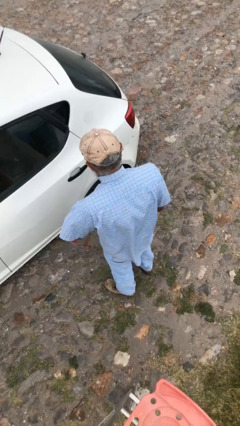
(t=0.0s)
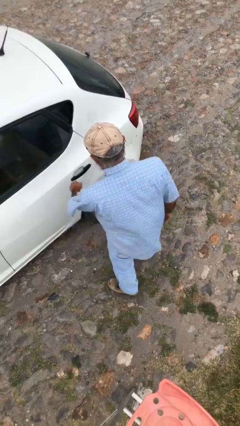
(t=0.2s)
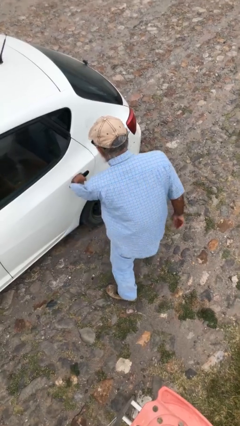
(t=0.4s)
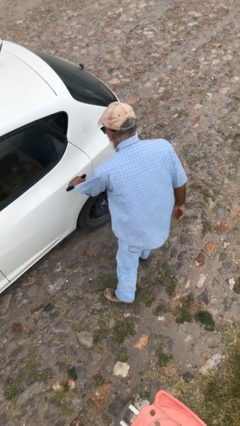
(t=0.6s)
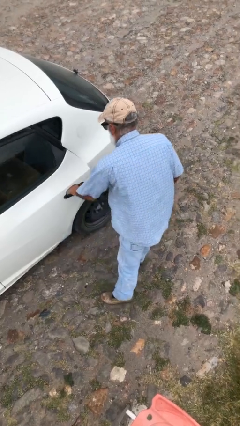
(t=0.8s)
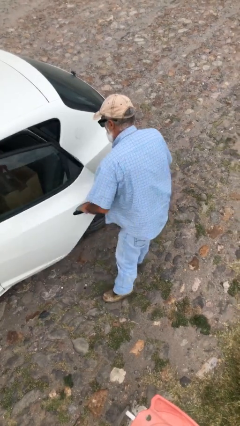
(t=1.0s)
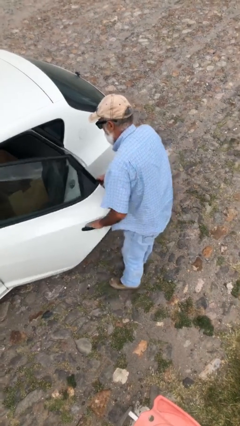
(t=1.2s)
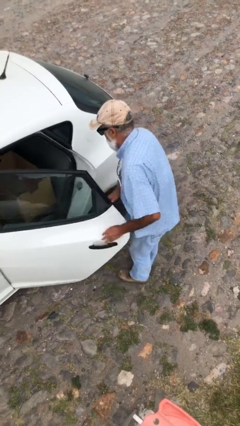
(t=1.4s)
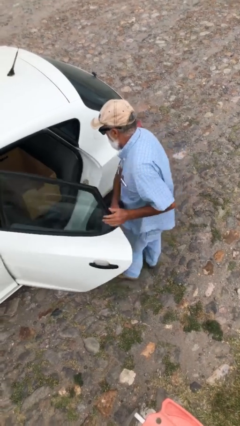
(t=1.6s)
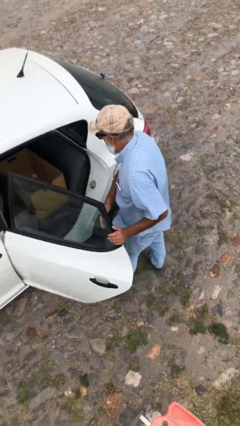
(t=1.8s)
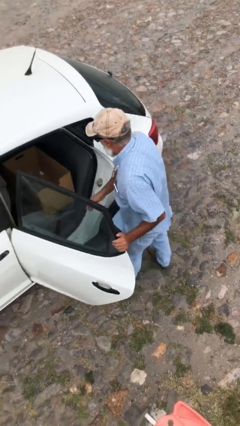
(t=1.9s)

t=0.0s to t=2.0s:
person opens car door

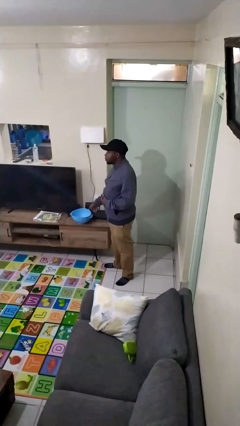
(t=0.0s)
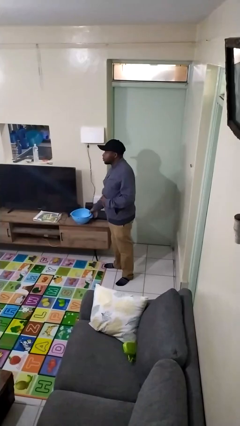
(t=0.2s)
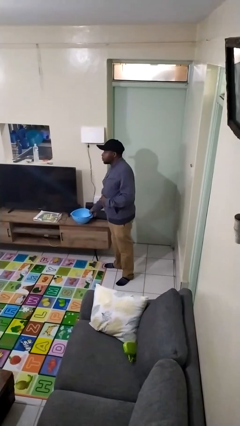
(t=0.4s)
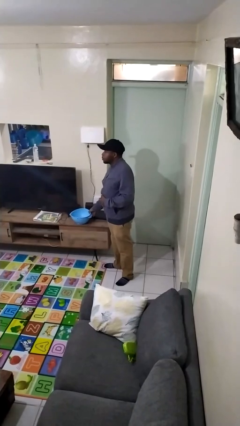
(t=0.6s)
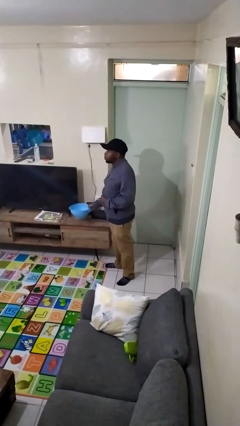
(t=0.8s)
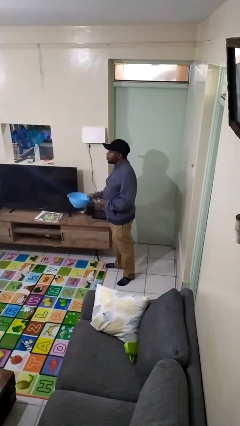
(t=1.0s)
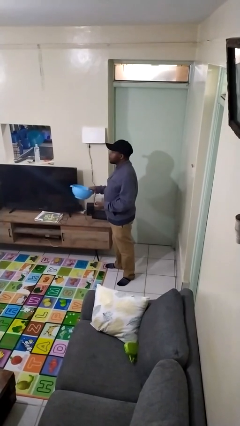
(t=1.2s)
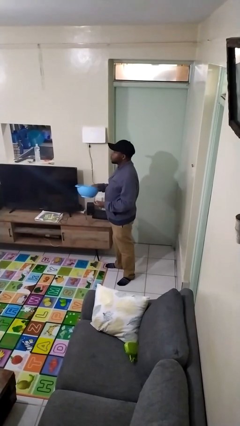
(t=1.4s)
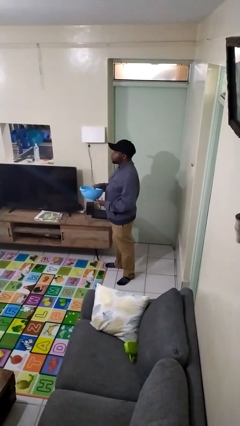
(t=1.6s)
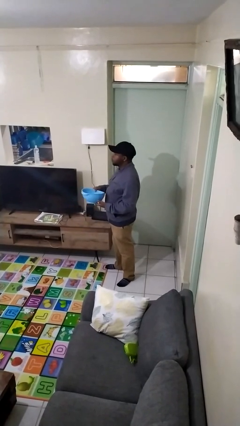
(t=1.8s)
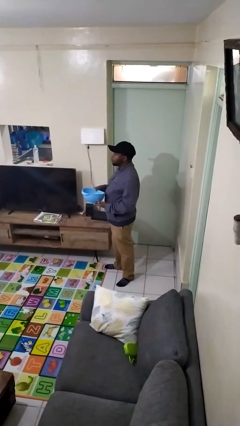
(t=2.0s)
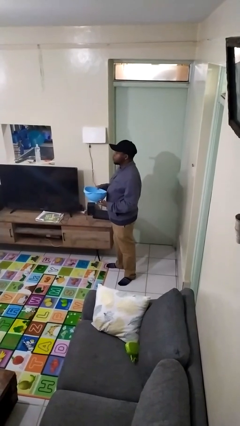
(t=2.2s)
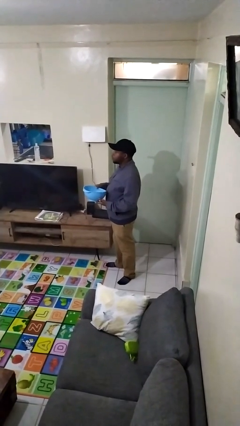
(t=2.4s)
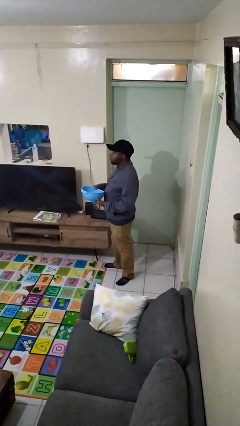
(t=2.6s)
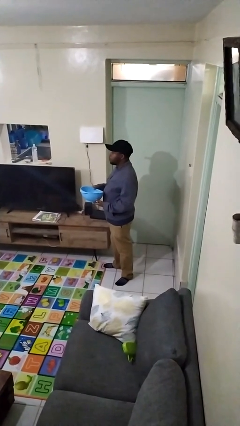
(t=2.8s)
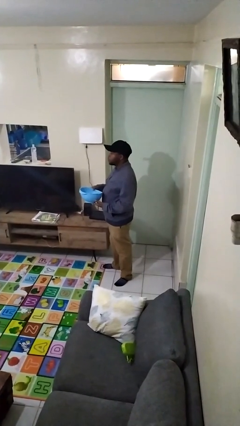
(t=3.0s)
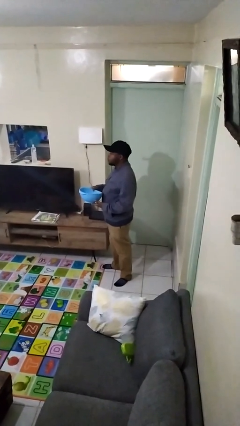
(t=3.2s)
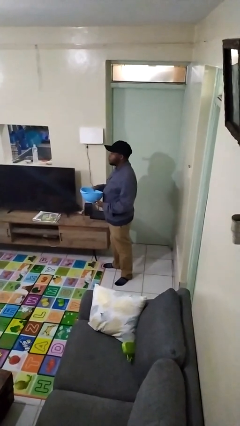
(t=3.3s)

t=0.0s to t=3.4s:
person picks up object from countertop

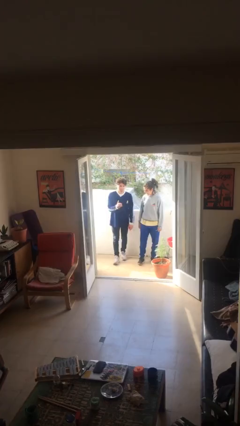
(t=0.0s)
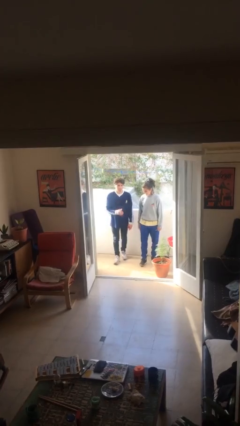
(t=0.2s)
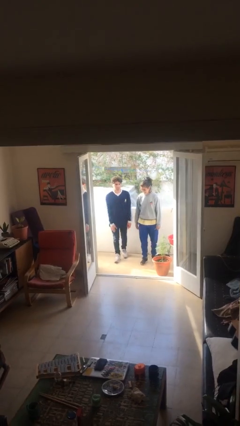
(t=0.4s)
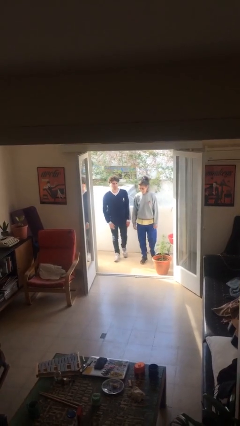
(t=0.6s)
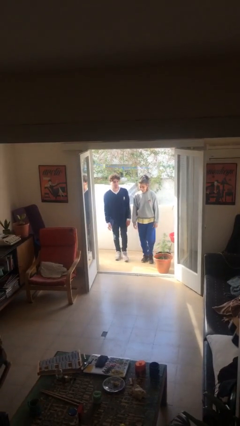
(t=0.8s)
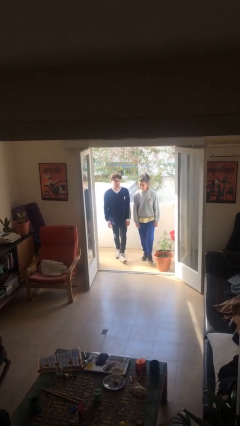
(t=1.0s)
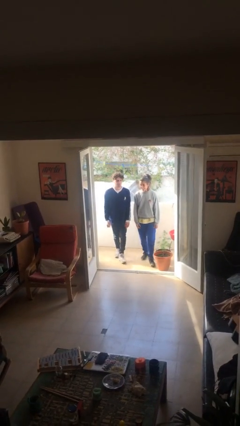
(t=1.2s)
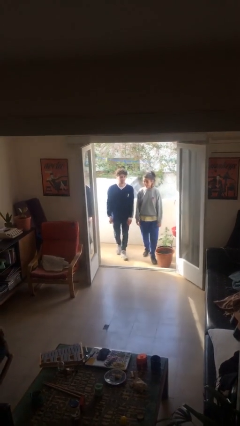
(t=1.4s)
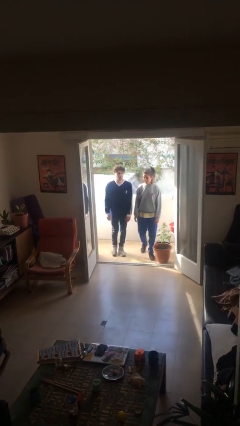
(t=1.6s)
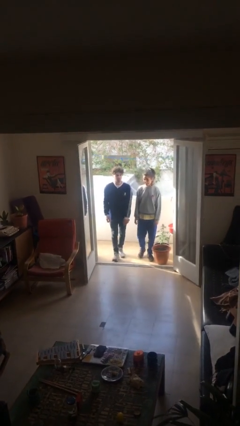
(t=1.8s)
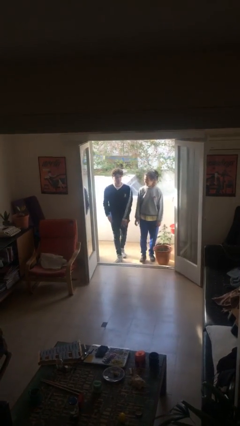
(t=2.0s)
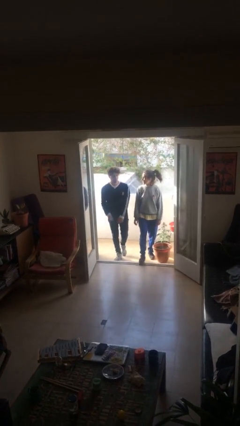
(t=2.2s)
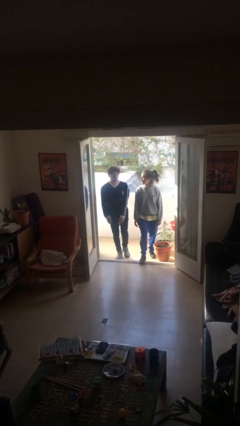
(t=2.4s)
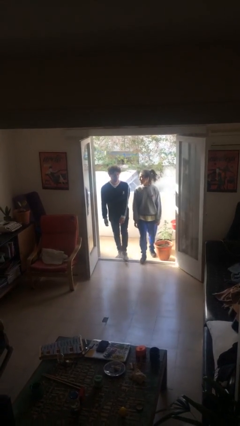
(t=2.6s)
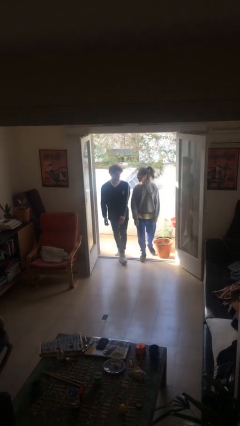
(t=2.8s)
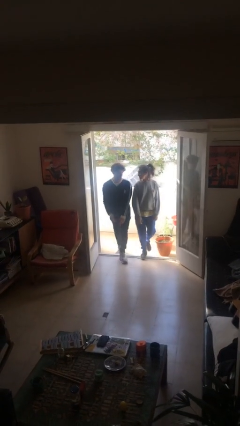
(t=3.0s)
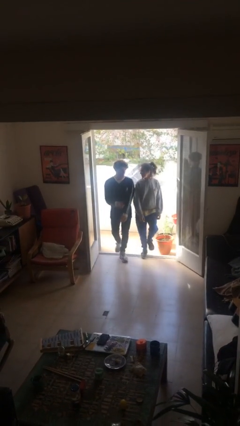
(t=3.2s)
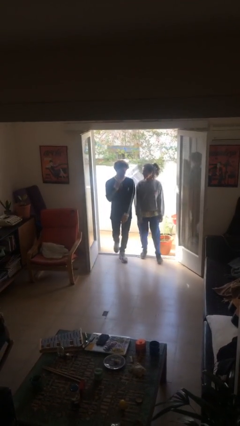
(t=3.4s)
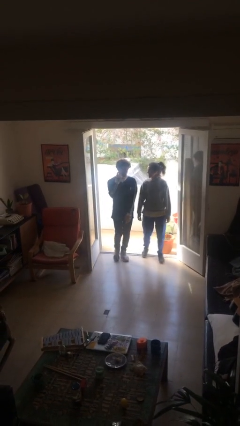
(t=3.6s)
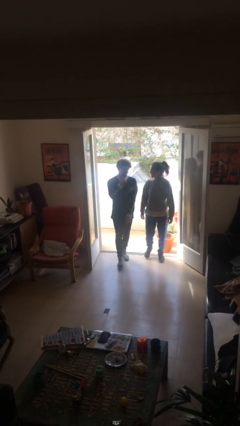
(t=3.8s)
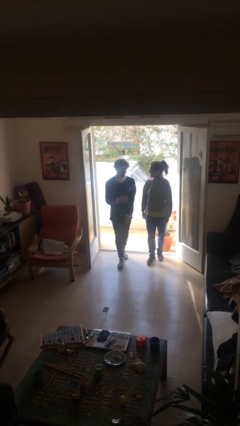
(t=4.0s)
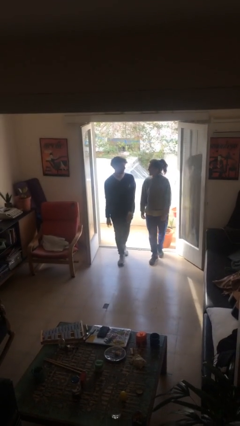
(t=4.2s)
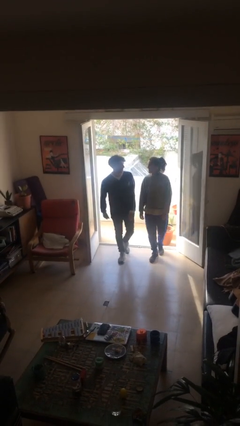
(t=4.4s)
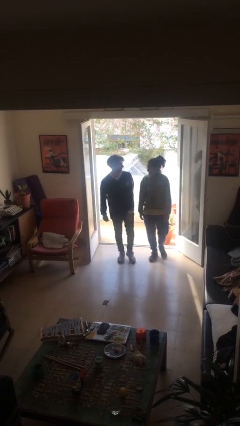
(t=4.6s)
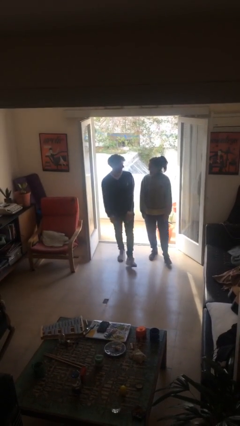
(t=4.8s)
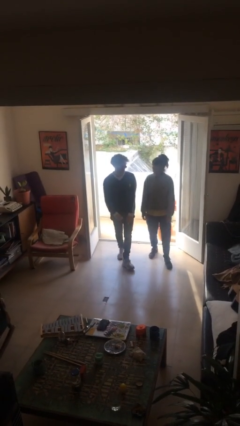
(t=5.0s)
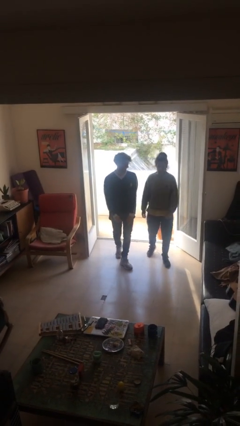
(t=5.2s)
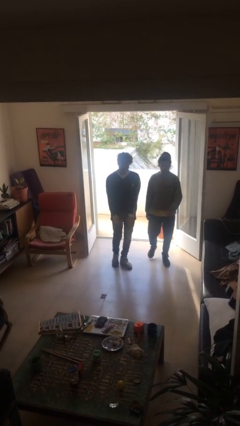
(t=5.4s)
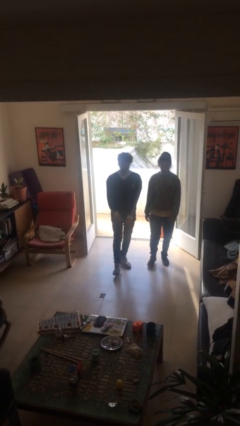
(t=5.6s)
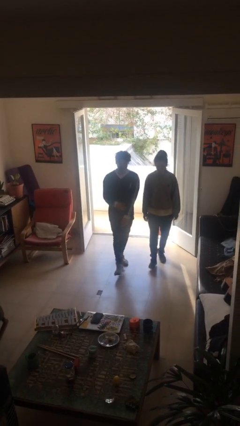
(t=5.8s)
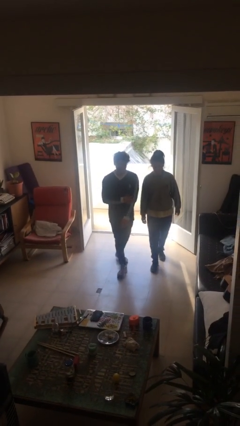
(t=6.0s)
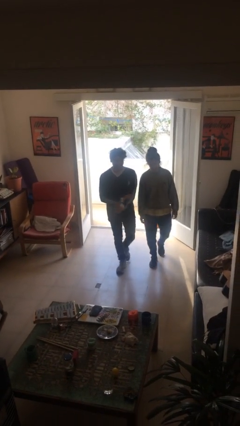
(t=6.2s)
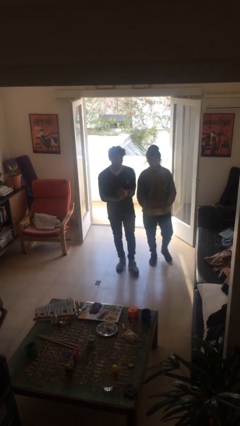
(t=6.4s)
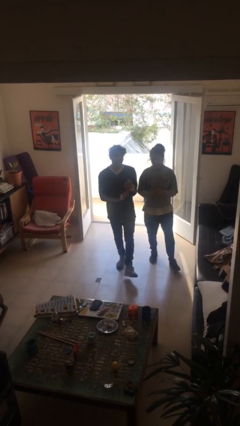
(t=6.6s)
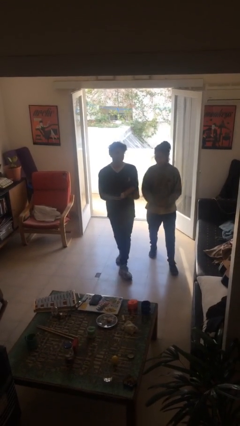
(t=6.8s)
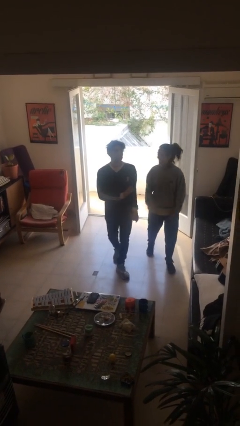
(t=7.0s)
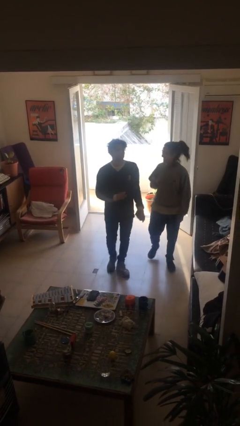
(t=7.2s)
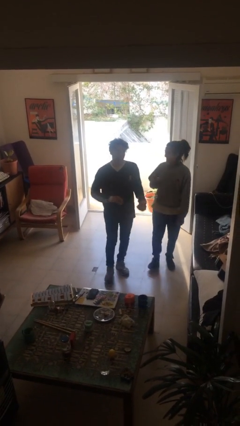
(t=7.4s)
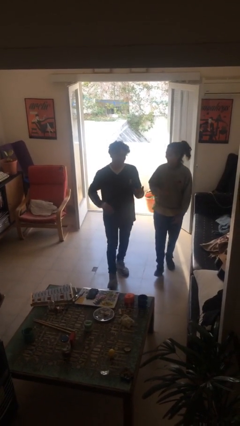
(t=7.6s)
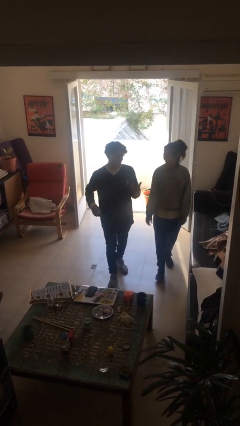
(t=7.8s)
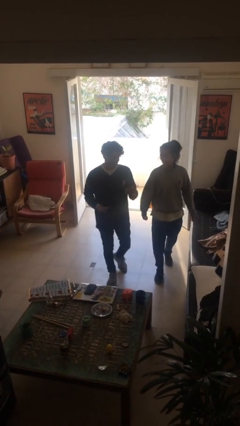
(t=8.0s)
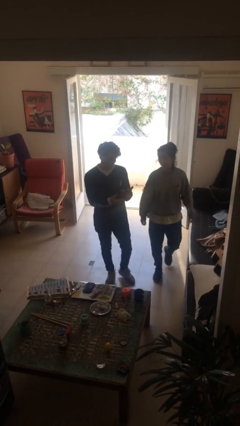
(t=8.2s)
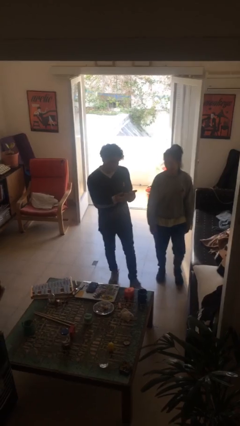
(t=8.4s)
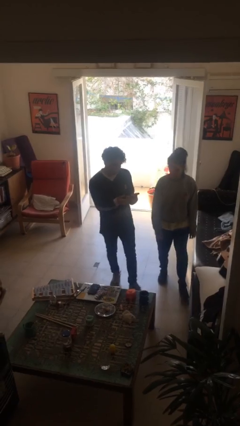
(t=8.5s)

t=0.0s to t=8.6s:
person talks to person

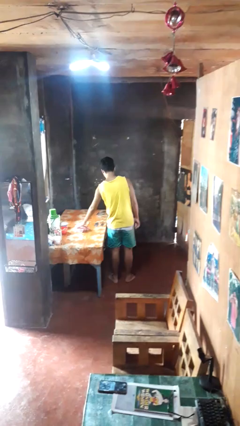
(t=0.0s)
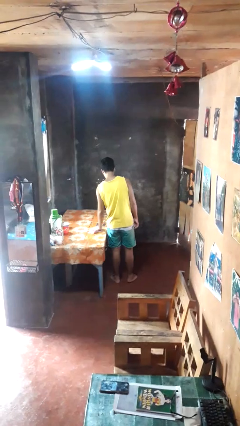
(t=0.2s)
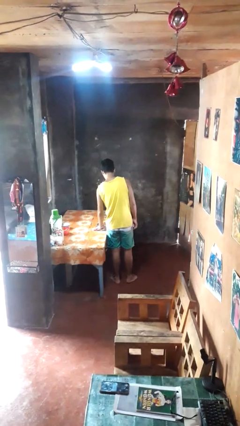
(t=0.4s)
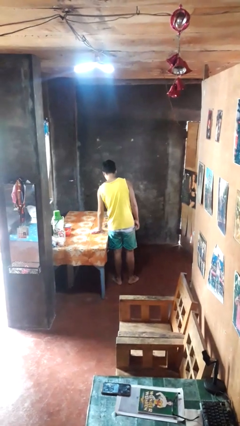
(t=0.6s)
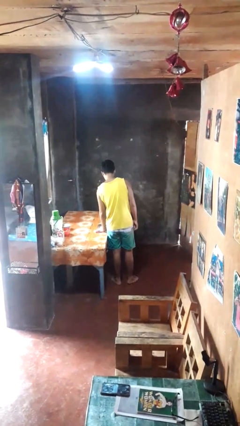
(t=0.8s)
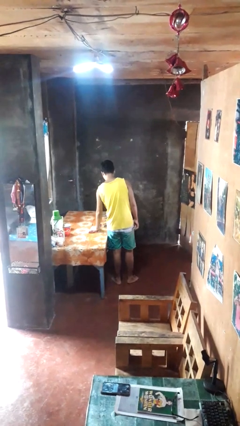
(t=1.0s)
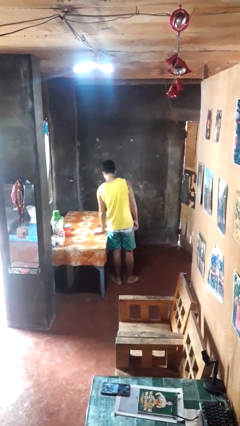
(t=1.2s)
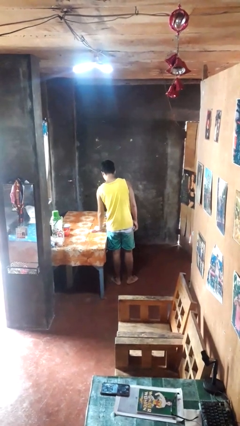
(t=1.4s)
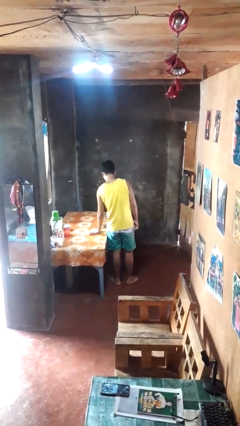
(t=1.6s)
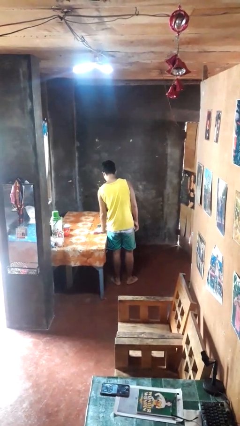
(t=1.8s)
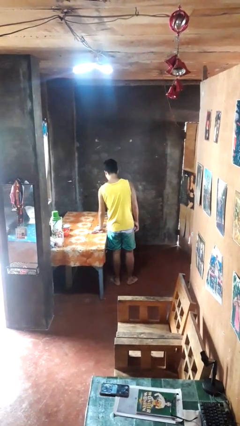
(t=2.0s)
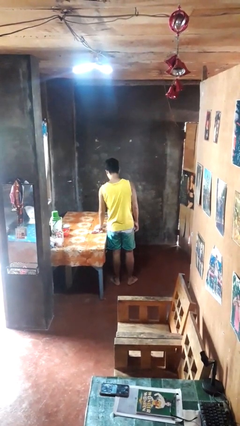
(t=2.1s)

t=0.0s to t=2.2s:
person cleans table with rag

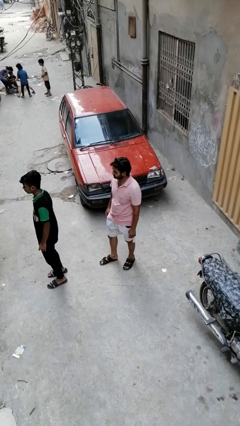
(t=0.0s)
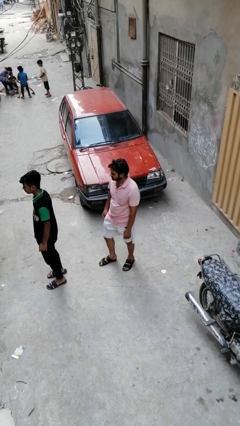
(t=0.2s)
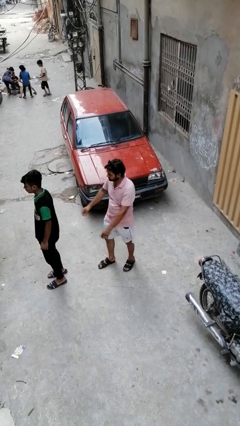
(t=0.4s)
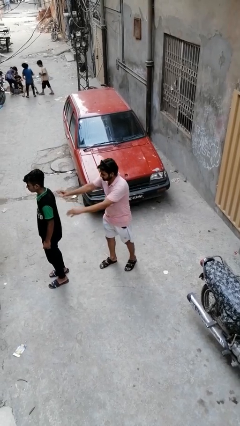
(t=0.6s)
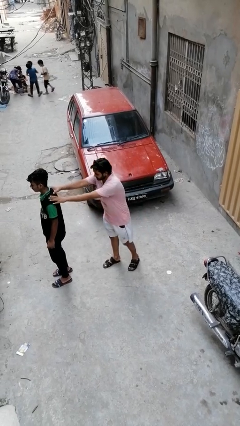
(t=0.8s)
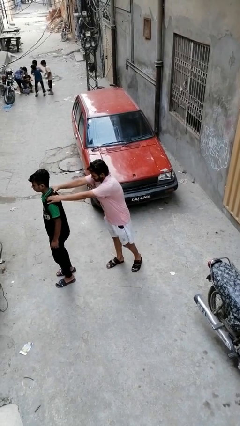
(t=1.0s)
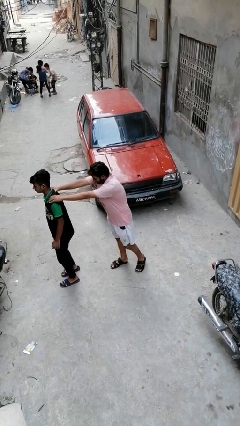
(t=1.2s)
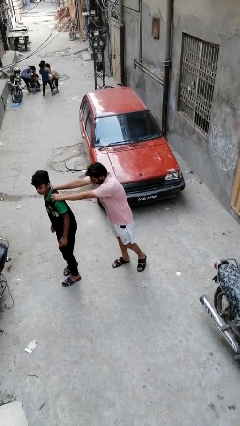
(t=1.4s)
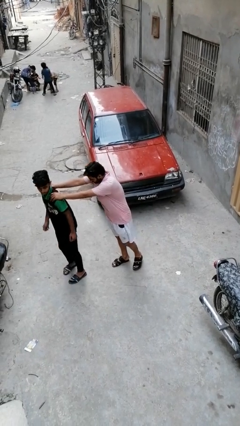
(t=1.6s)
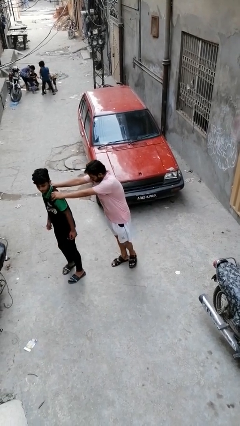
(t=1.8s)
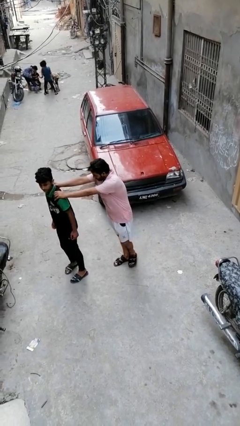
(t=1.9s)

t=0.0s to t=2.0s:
person grabs person by shoulder
